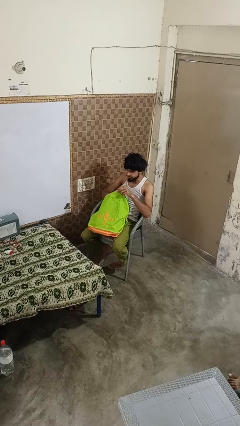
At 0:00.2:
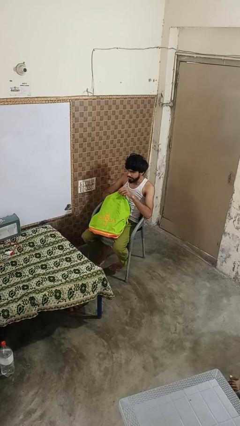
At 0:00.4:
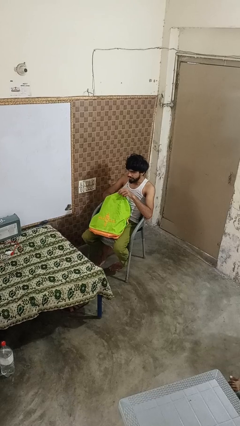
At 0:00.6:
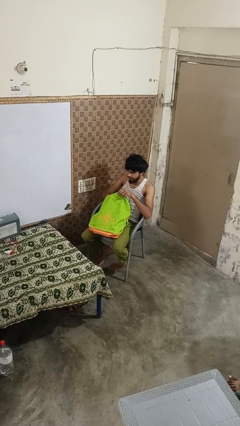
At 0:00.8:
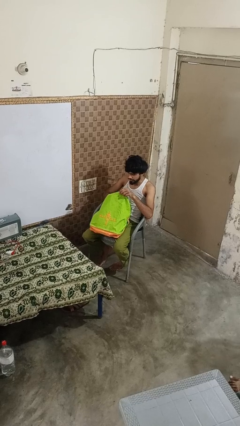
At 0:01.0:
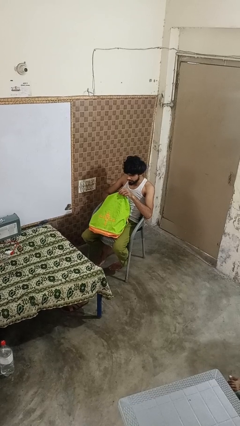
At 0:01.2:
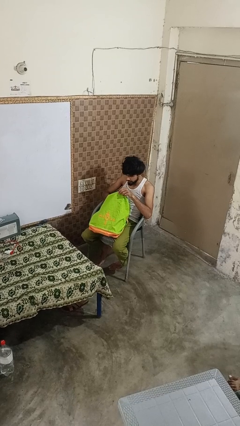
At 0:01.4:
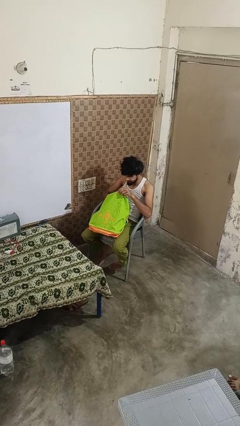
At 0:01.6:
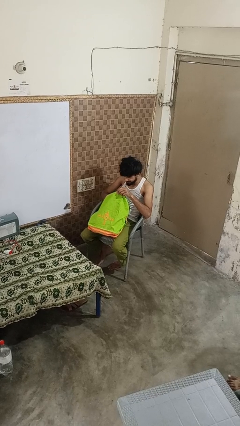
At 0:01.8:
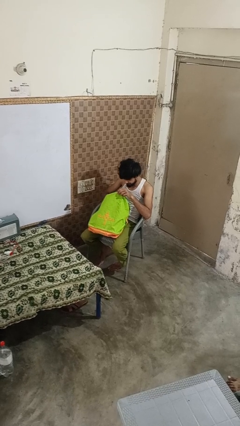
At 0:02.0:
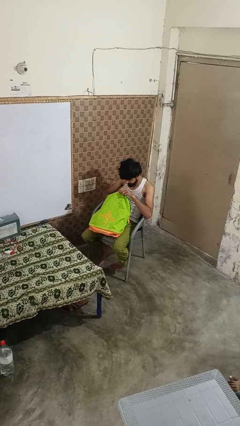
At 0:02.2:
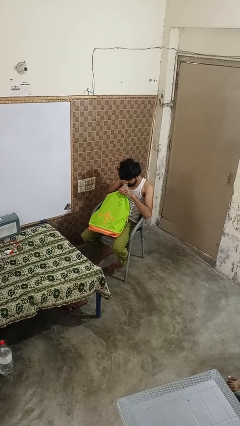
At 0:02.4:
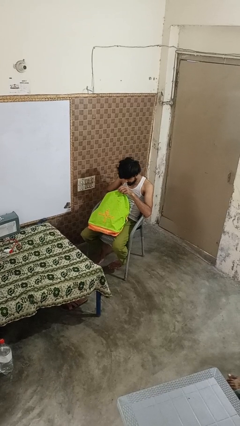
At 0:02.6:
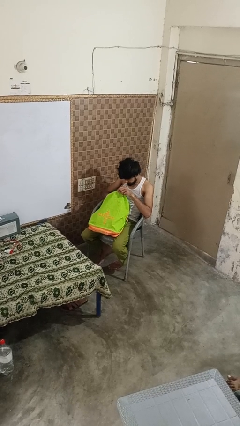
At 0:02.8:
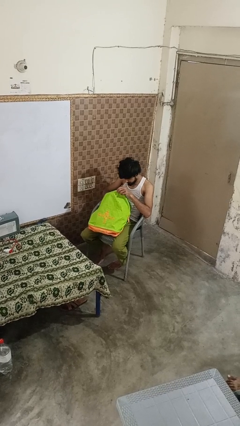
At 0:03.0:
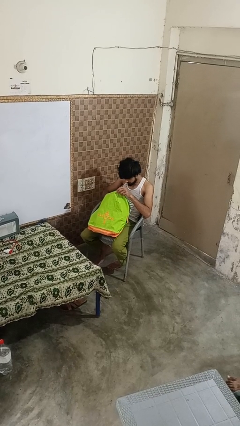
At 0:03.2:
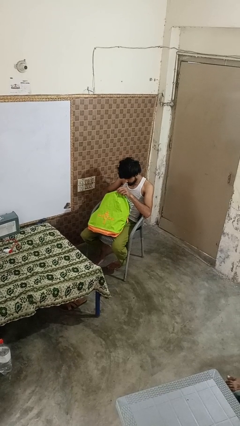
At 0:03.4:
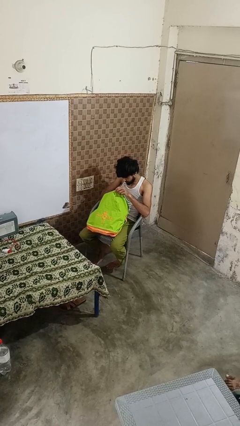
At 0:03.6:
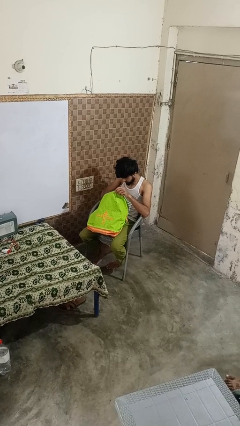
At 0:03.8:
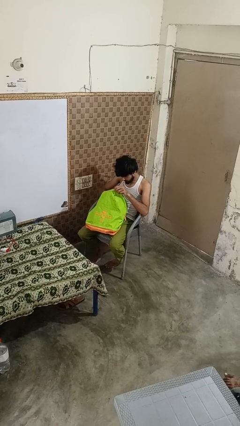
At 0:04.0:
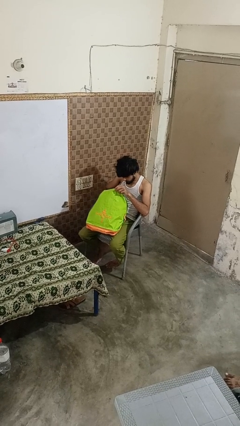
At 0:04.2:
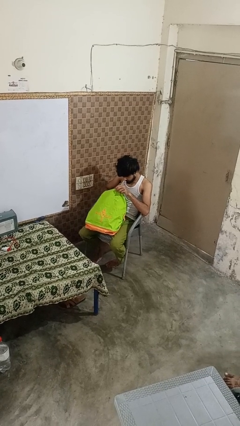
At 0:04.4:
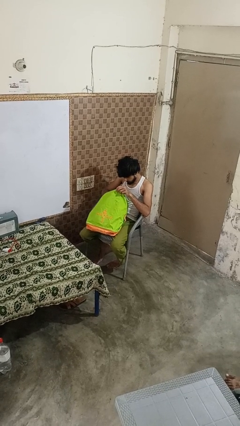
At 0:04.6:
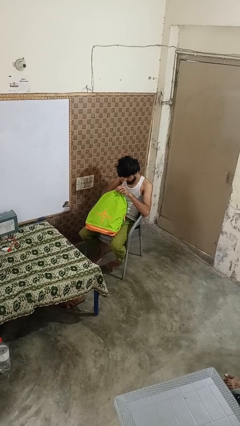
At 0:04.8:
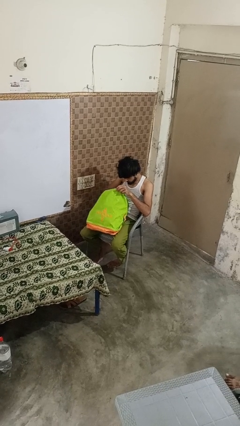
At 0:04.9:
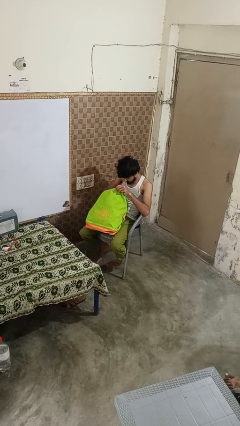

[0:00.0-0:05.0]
person searches in bag

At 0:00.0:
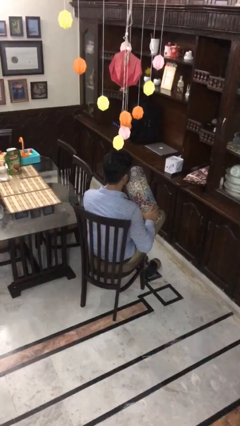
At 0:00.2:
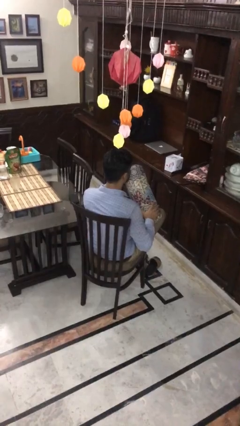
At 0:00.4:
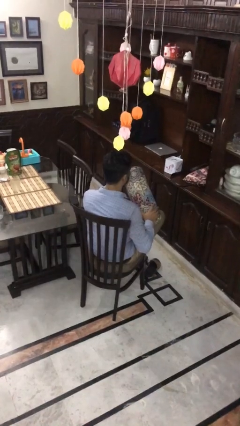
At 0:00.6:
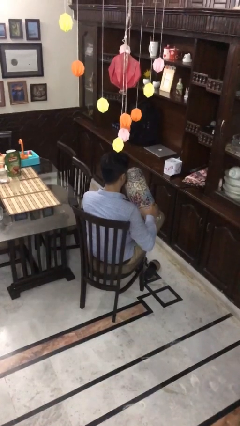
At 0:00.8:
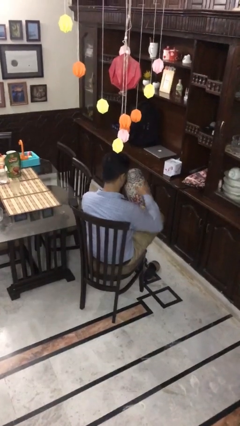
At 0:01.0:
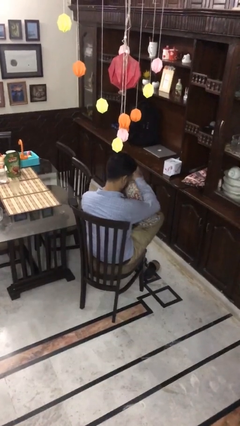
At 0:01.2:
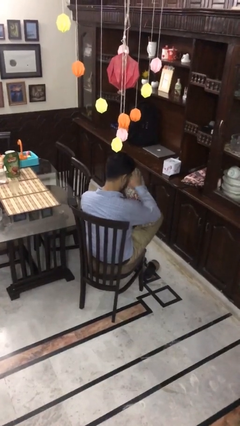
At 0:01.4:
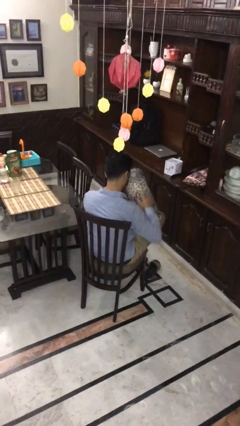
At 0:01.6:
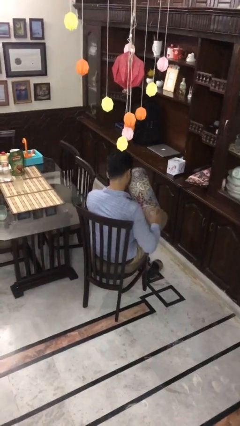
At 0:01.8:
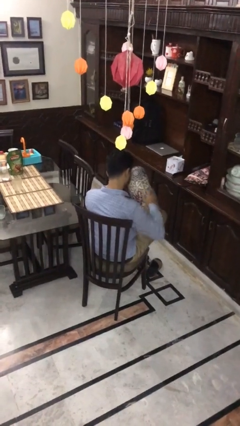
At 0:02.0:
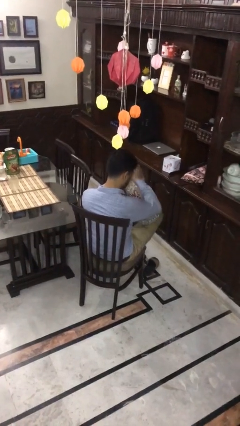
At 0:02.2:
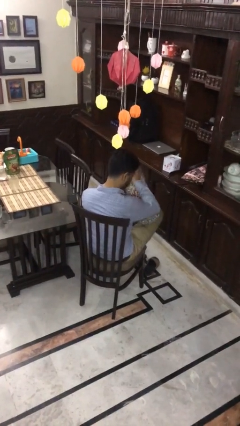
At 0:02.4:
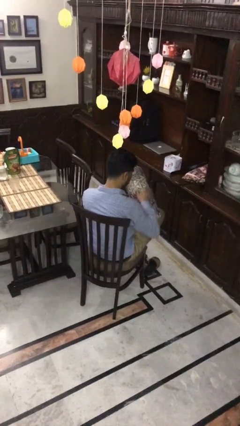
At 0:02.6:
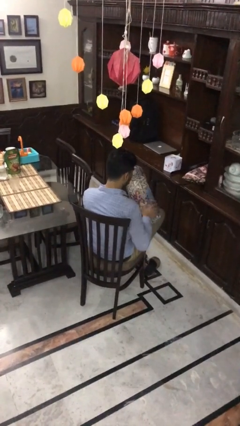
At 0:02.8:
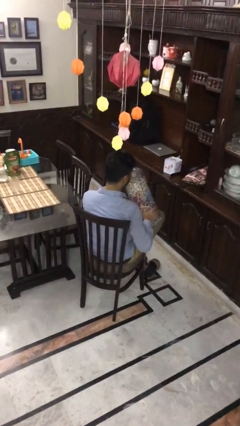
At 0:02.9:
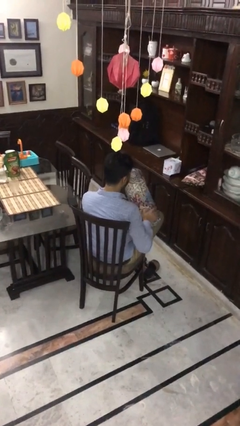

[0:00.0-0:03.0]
person waves hand over object

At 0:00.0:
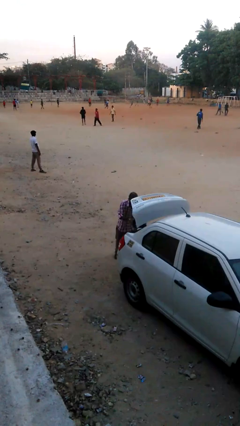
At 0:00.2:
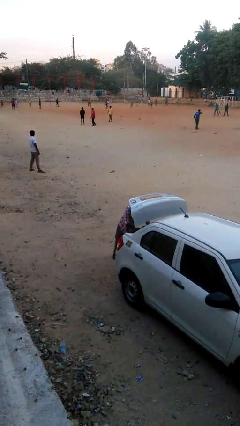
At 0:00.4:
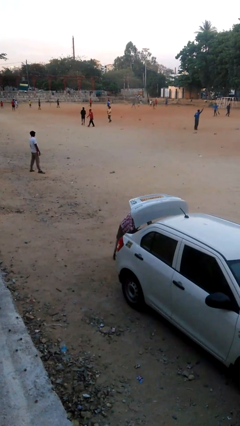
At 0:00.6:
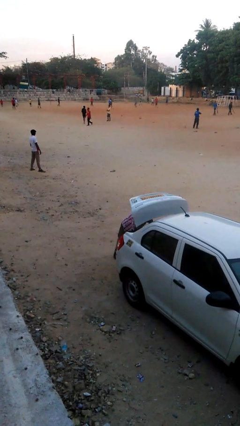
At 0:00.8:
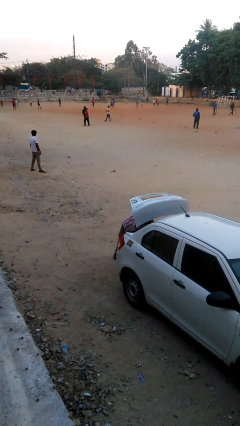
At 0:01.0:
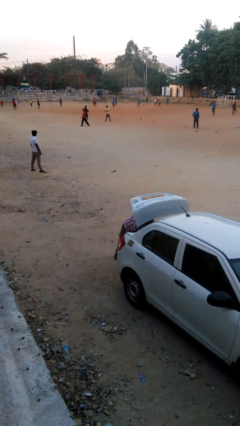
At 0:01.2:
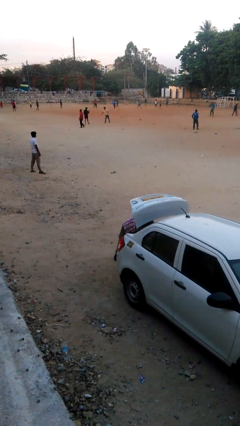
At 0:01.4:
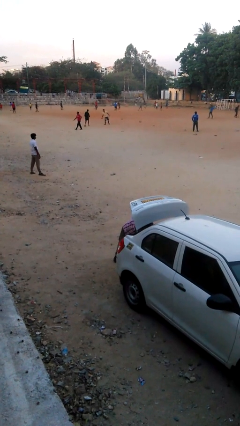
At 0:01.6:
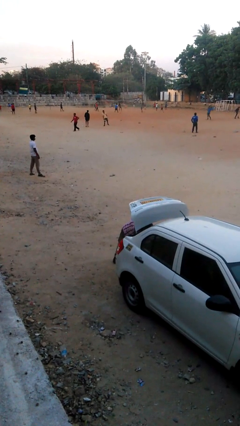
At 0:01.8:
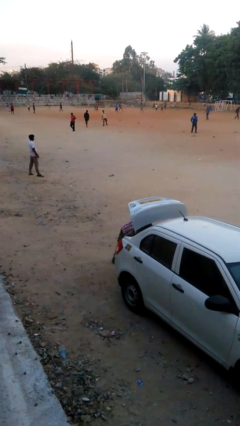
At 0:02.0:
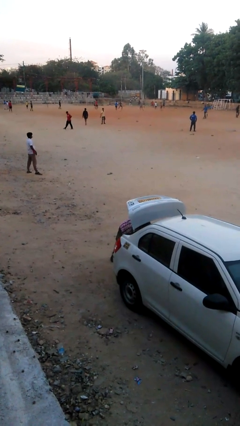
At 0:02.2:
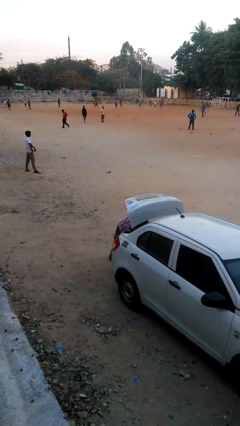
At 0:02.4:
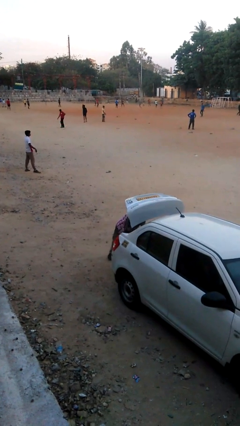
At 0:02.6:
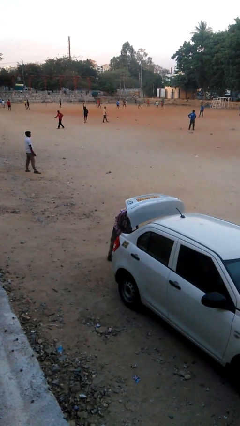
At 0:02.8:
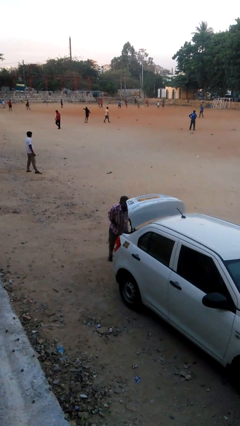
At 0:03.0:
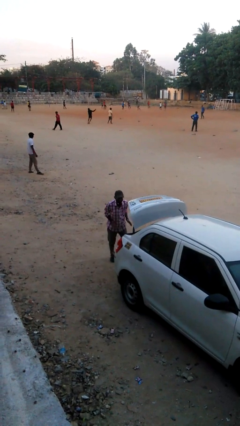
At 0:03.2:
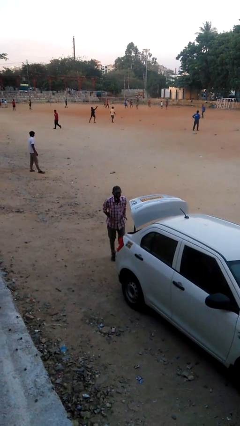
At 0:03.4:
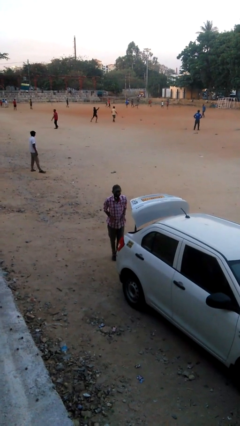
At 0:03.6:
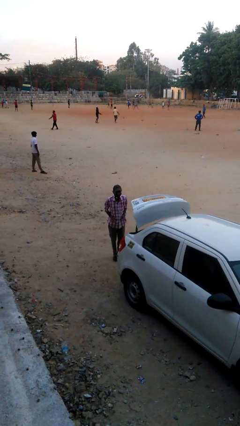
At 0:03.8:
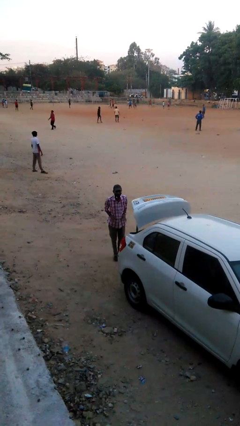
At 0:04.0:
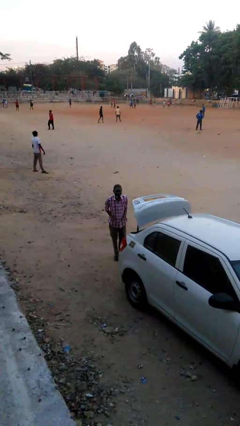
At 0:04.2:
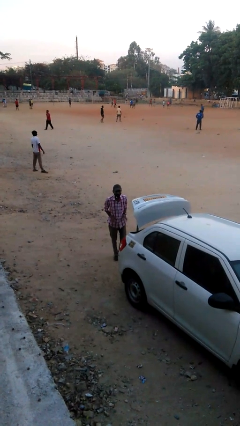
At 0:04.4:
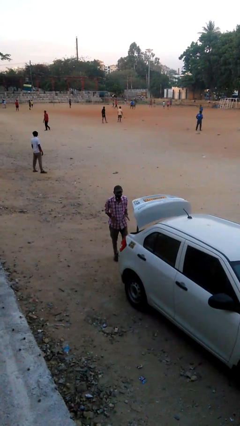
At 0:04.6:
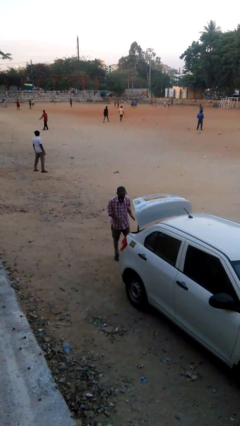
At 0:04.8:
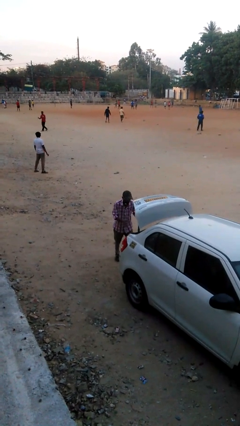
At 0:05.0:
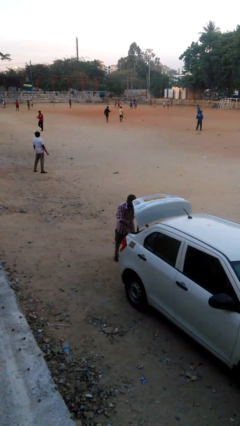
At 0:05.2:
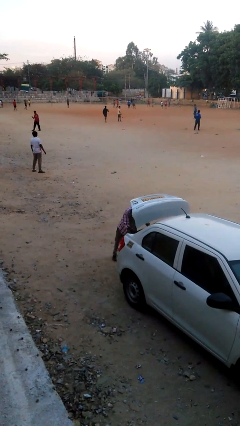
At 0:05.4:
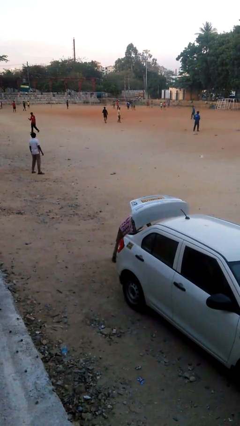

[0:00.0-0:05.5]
person loads car

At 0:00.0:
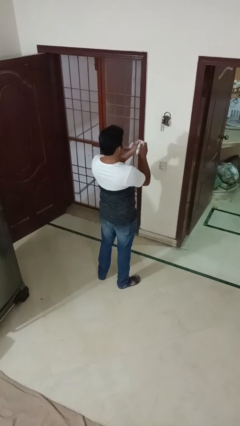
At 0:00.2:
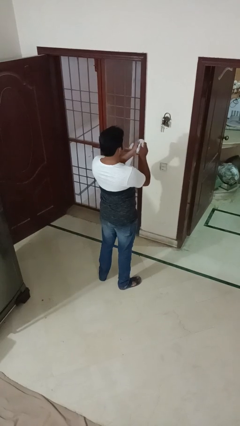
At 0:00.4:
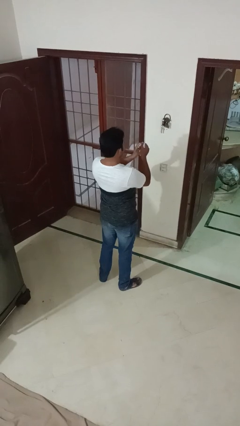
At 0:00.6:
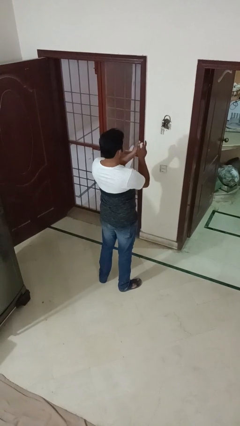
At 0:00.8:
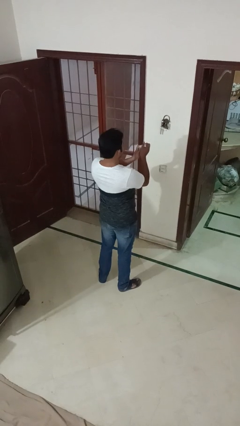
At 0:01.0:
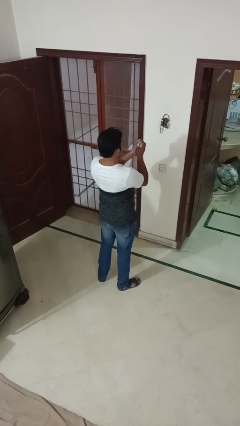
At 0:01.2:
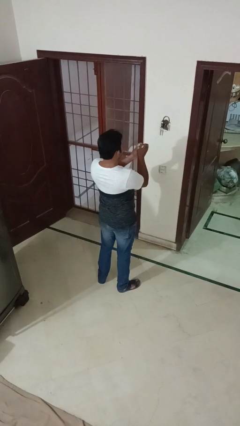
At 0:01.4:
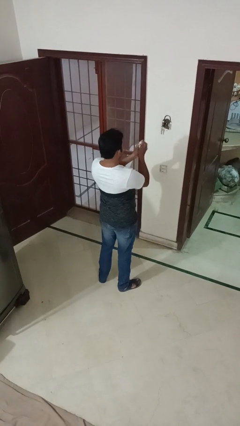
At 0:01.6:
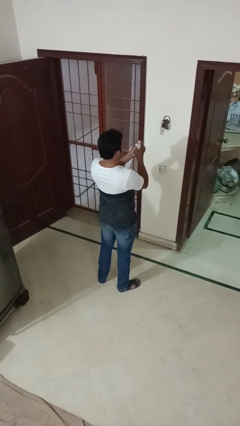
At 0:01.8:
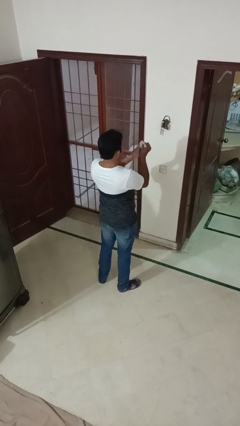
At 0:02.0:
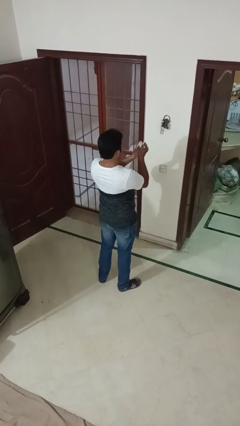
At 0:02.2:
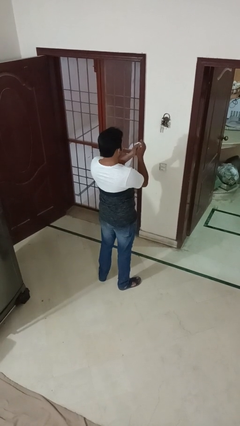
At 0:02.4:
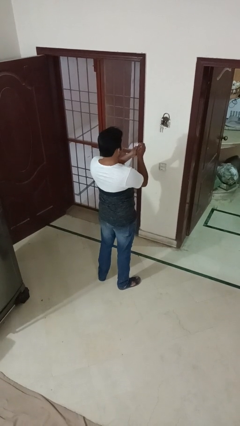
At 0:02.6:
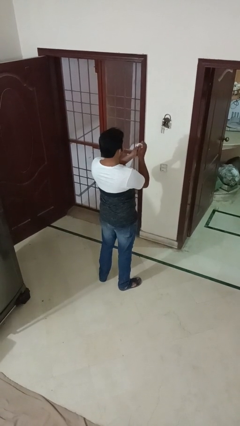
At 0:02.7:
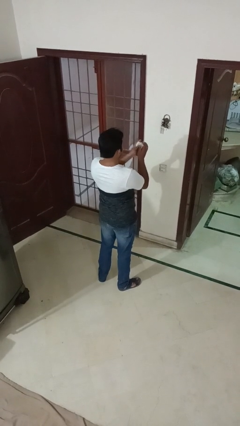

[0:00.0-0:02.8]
person crumples paper

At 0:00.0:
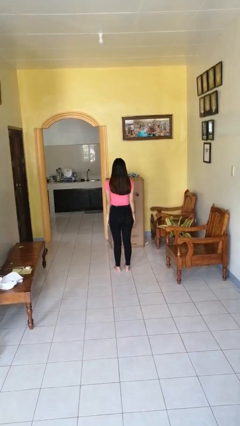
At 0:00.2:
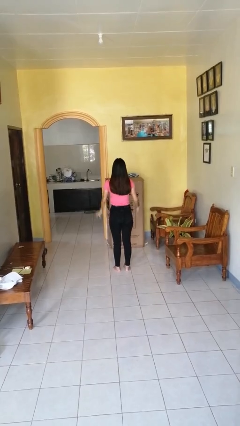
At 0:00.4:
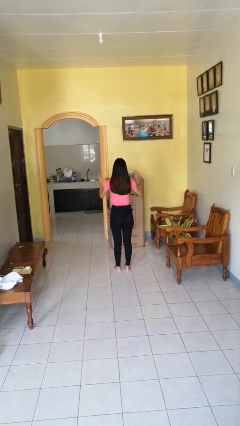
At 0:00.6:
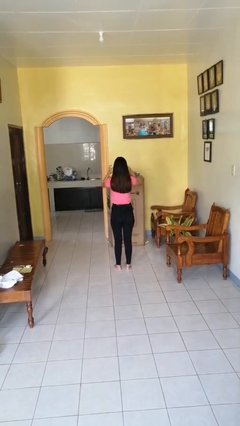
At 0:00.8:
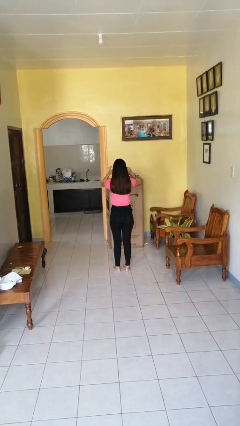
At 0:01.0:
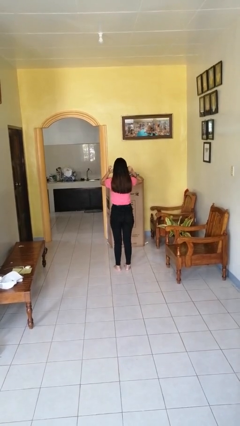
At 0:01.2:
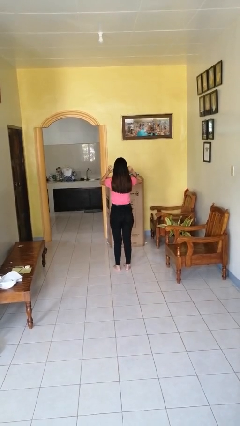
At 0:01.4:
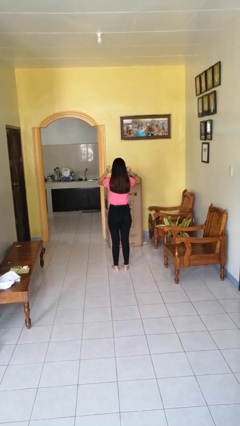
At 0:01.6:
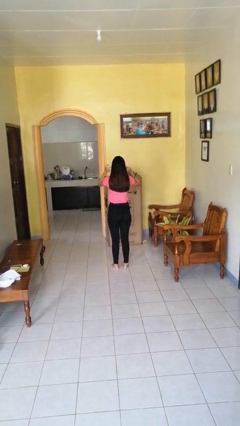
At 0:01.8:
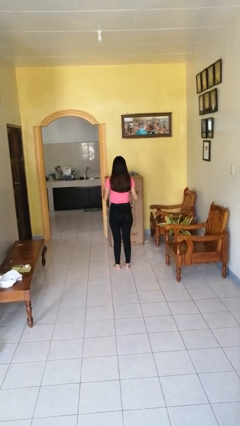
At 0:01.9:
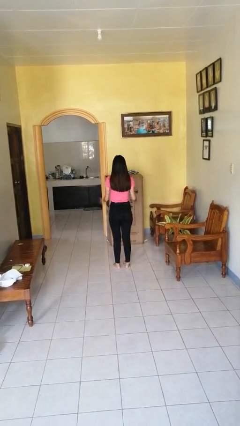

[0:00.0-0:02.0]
person puts fingers in ear
